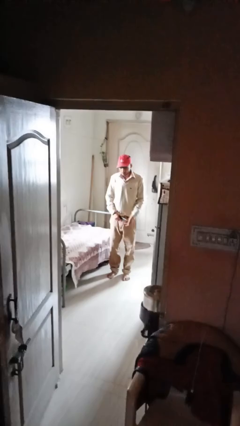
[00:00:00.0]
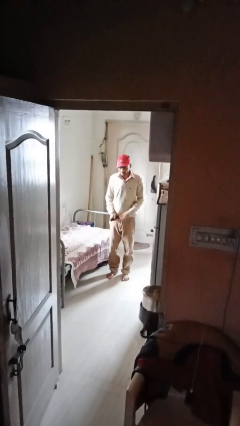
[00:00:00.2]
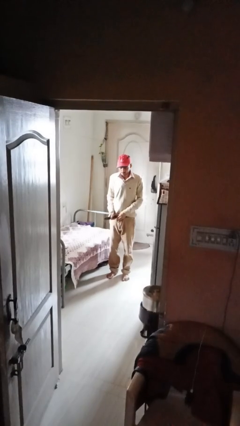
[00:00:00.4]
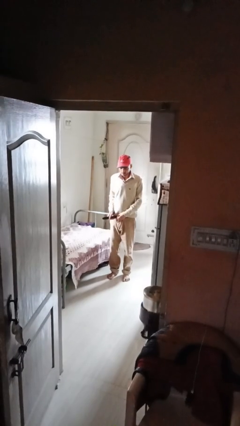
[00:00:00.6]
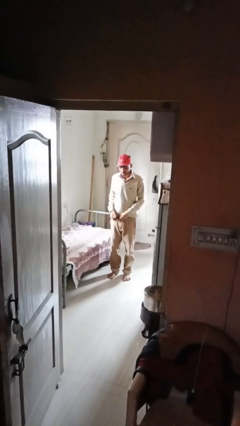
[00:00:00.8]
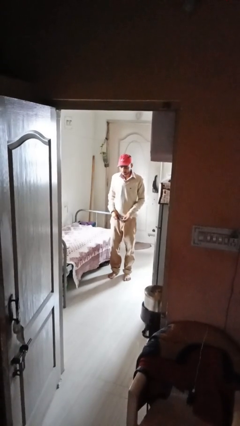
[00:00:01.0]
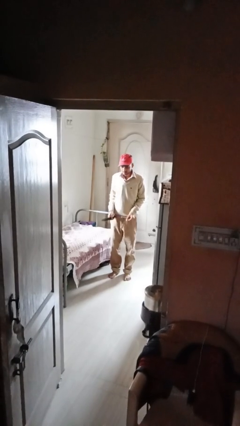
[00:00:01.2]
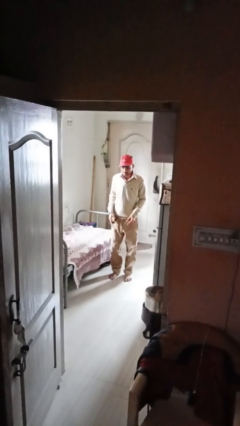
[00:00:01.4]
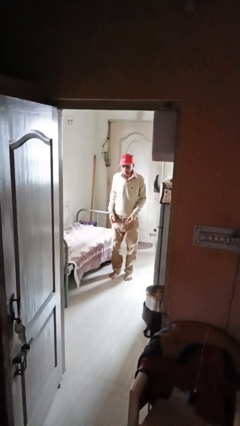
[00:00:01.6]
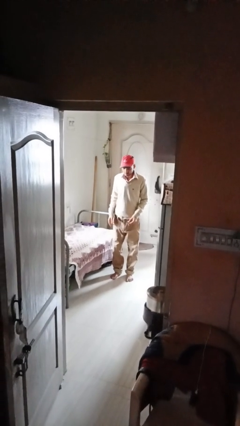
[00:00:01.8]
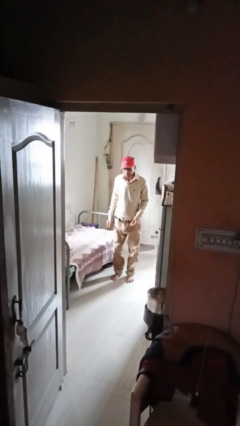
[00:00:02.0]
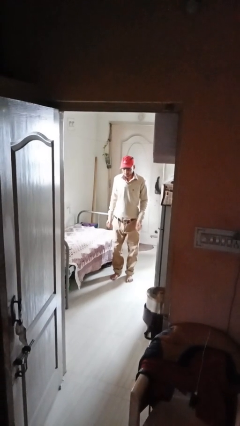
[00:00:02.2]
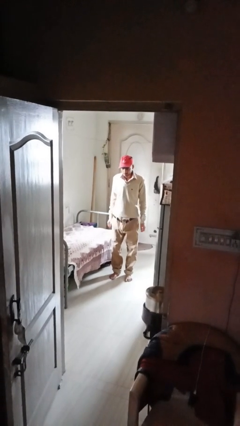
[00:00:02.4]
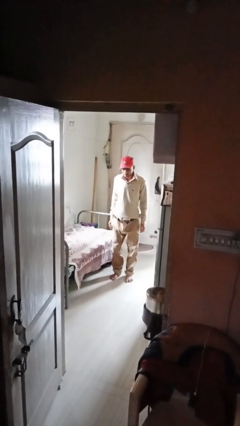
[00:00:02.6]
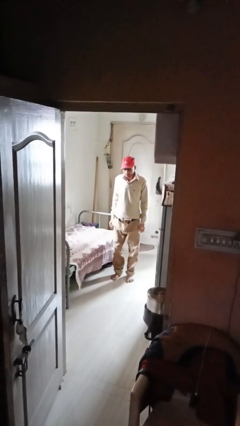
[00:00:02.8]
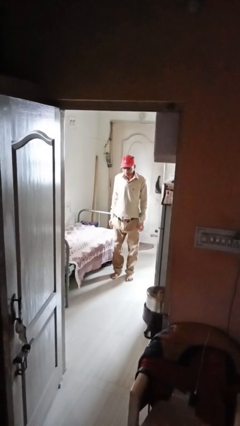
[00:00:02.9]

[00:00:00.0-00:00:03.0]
person takes off belt

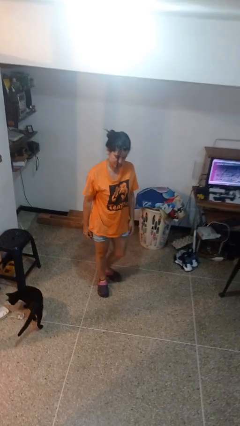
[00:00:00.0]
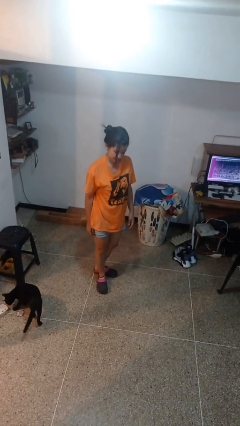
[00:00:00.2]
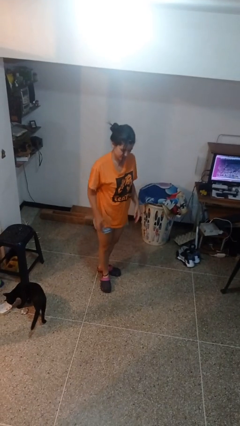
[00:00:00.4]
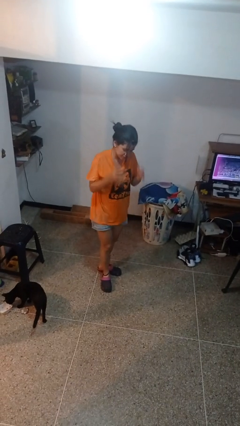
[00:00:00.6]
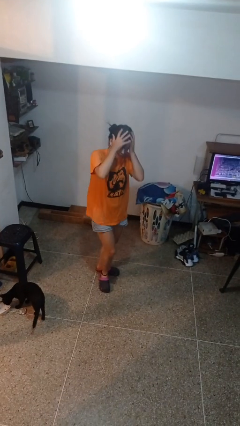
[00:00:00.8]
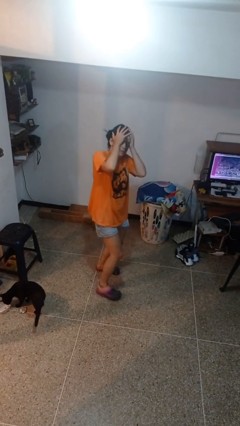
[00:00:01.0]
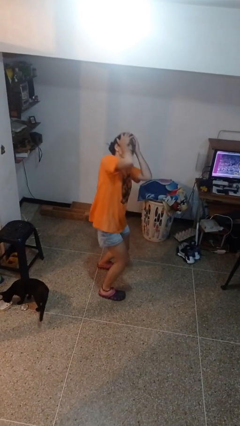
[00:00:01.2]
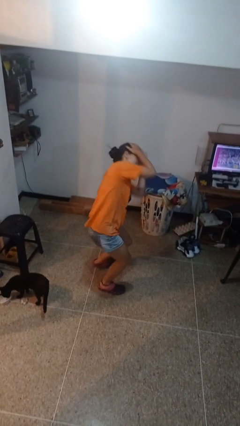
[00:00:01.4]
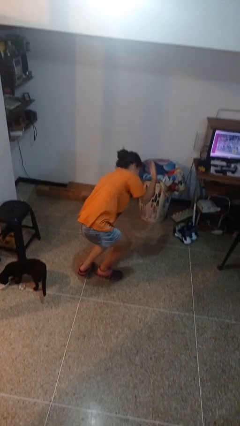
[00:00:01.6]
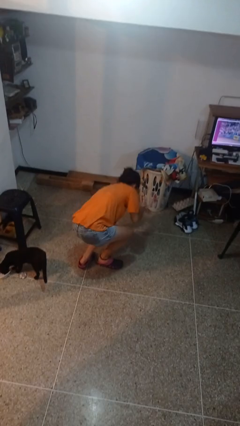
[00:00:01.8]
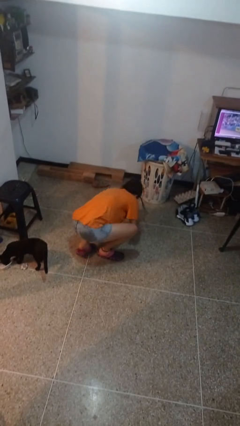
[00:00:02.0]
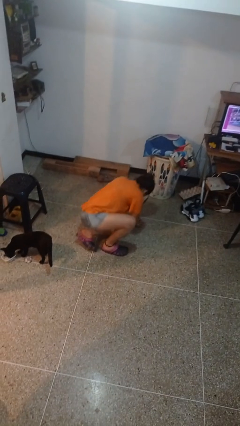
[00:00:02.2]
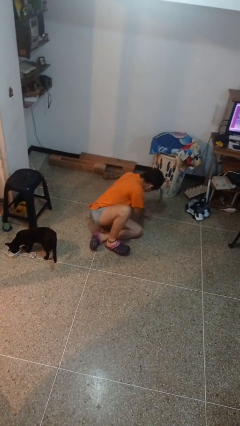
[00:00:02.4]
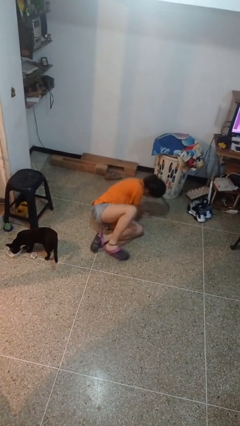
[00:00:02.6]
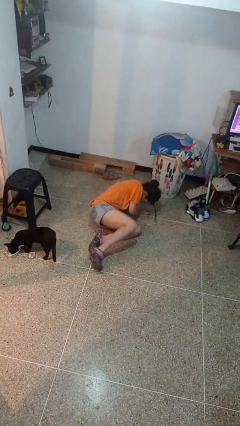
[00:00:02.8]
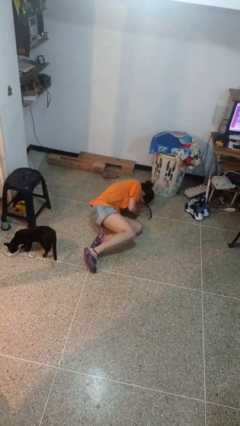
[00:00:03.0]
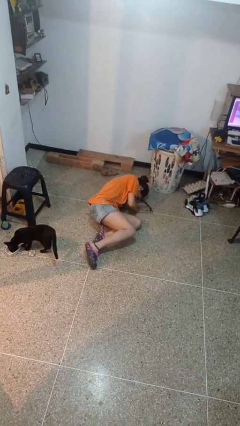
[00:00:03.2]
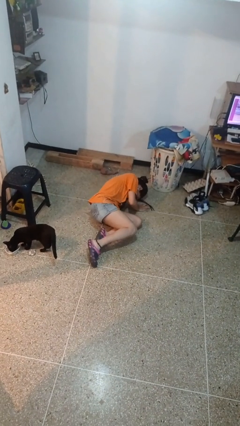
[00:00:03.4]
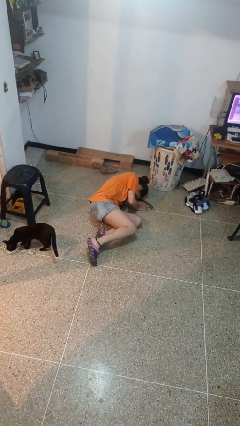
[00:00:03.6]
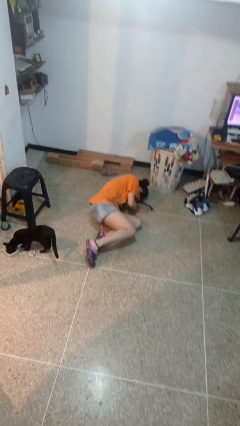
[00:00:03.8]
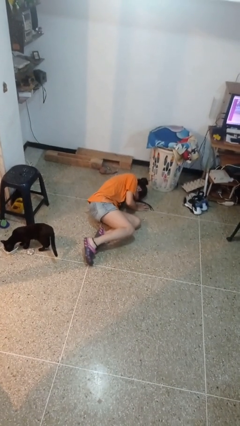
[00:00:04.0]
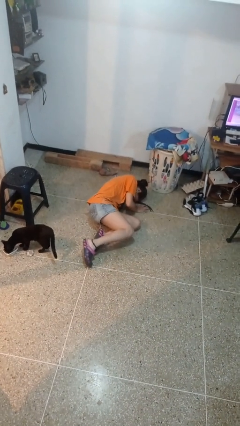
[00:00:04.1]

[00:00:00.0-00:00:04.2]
person falls while standing

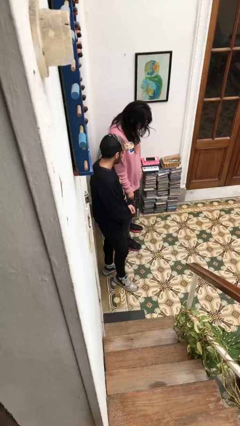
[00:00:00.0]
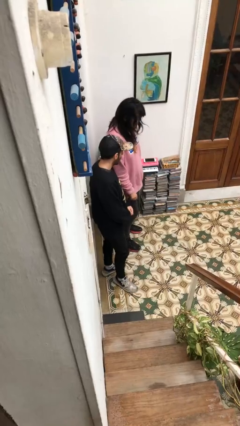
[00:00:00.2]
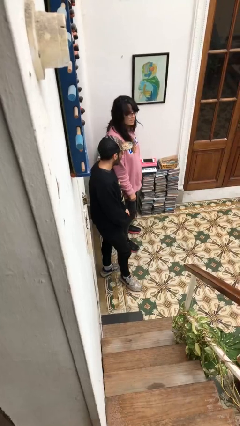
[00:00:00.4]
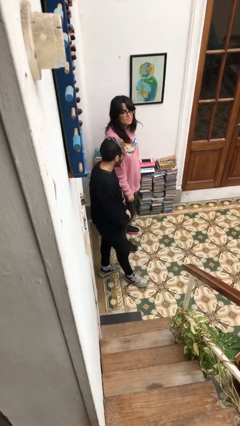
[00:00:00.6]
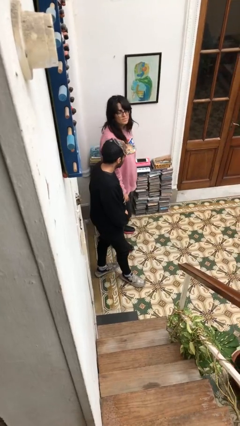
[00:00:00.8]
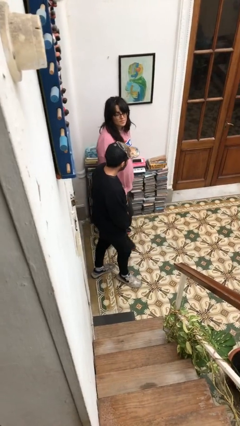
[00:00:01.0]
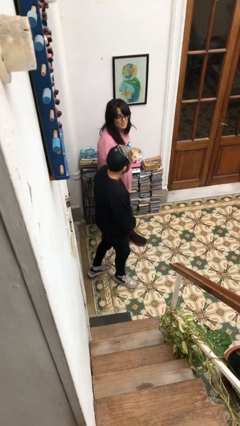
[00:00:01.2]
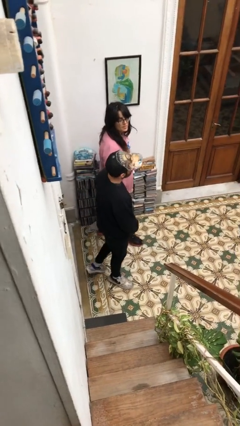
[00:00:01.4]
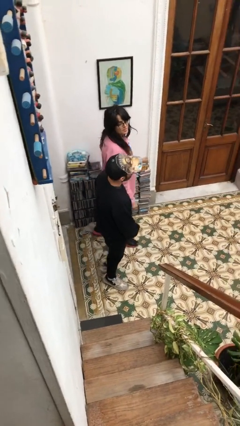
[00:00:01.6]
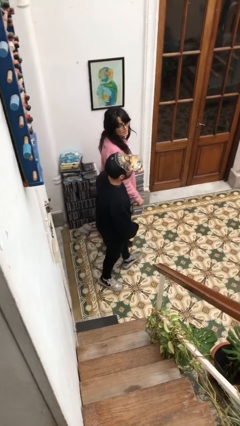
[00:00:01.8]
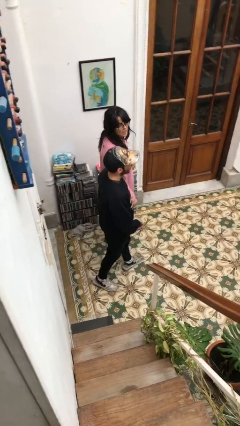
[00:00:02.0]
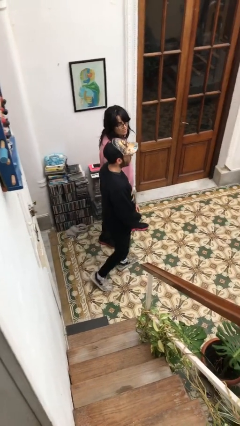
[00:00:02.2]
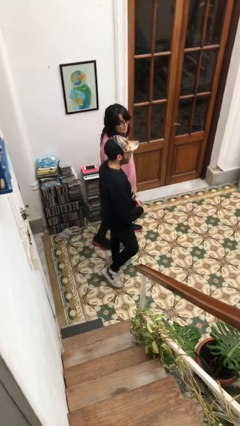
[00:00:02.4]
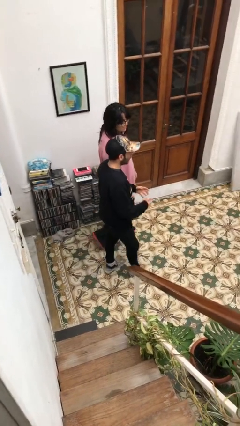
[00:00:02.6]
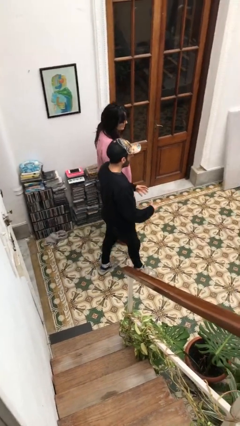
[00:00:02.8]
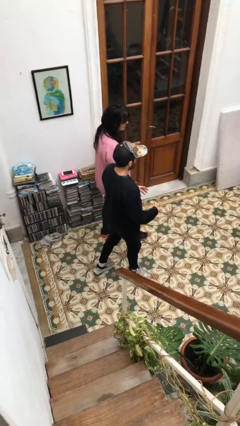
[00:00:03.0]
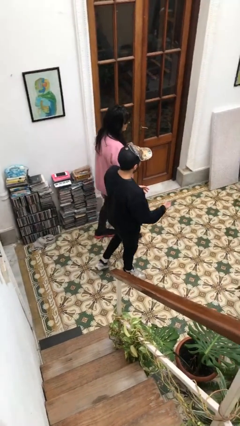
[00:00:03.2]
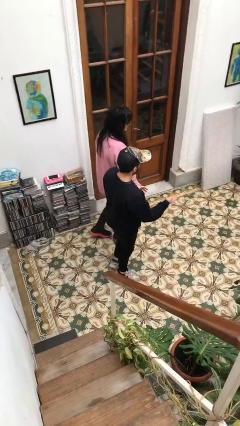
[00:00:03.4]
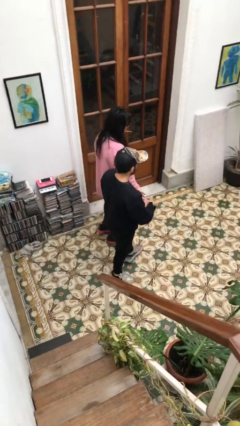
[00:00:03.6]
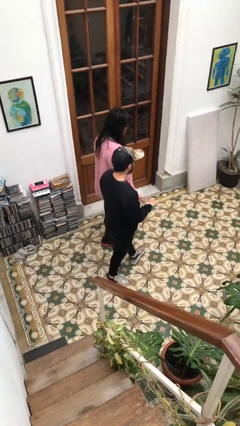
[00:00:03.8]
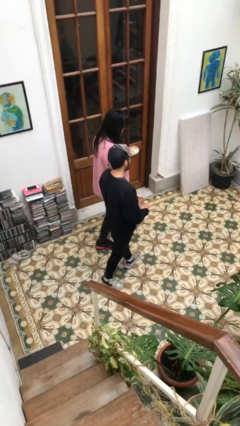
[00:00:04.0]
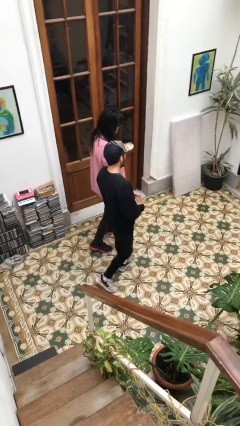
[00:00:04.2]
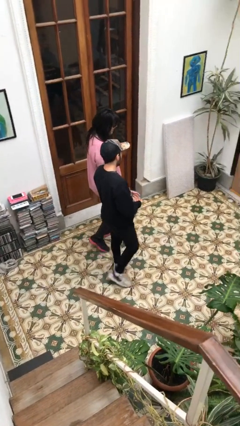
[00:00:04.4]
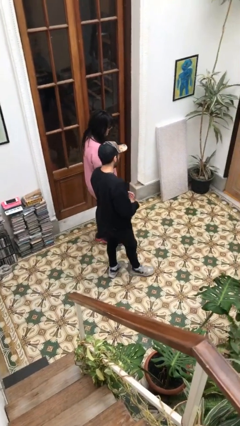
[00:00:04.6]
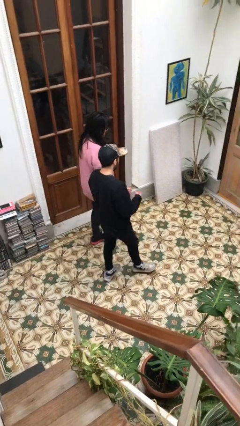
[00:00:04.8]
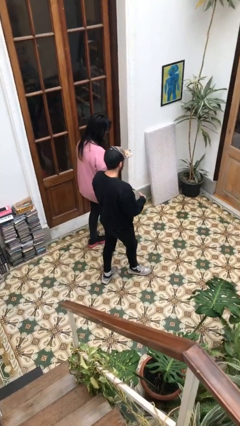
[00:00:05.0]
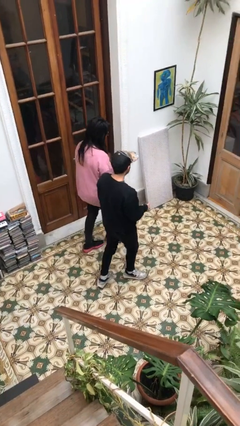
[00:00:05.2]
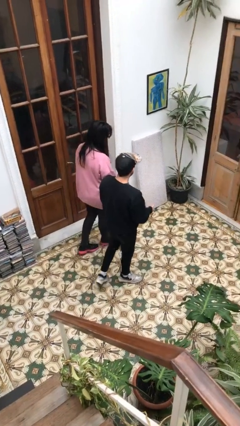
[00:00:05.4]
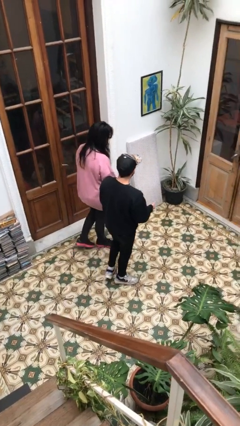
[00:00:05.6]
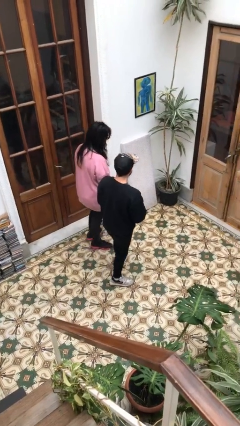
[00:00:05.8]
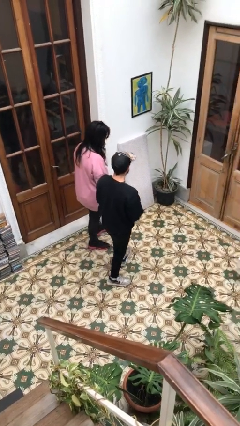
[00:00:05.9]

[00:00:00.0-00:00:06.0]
person talks to person

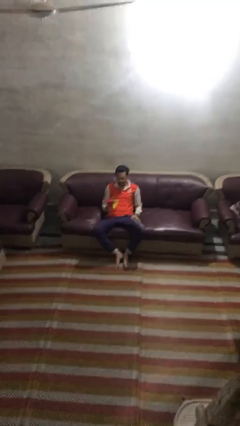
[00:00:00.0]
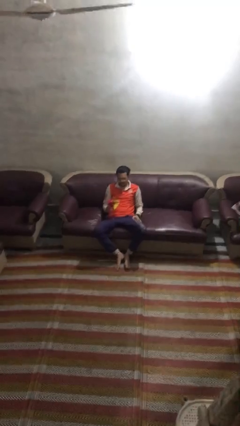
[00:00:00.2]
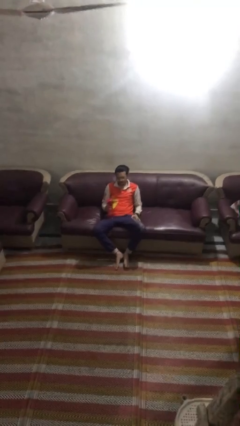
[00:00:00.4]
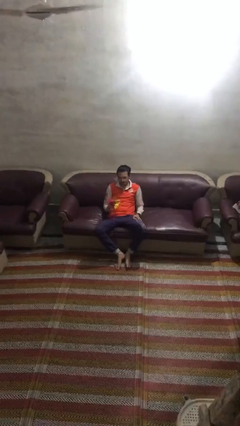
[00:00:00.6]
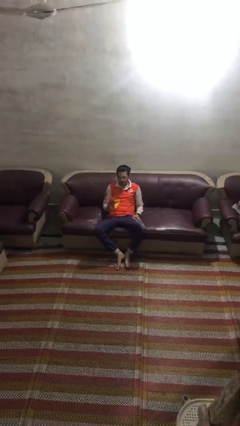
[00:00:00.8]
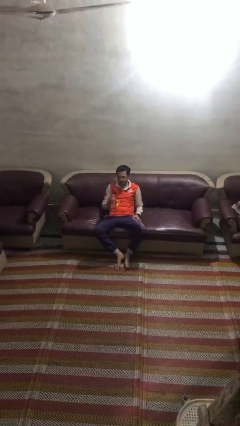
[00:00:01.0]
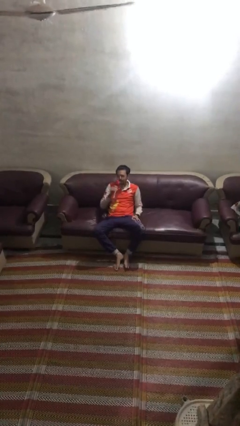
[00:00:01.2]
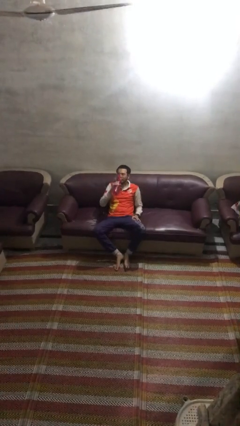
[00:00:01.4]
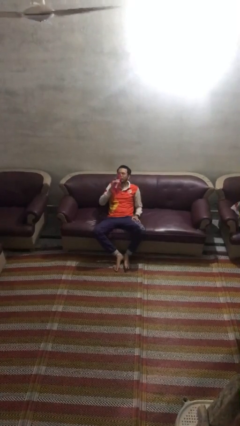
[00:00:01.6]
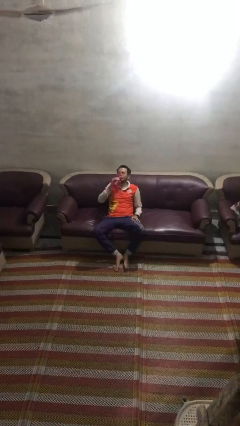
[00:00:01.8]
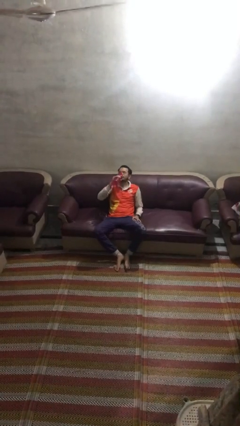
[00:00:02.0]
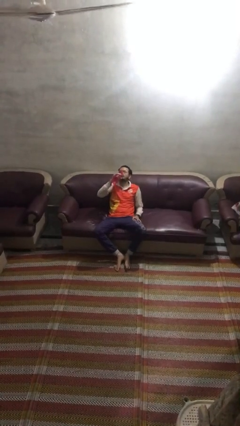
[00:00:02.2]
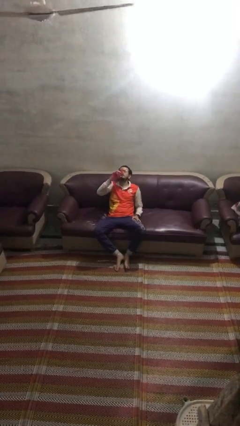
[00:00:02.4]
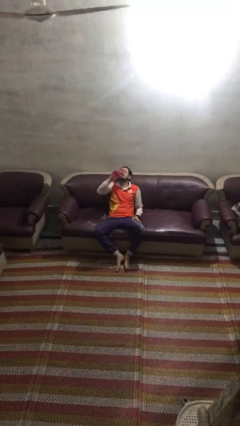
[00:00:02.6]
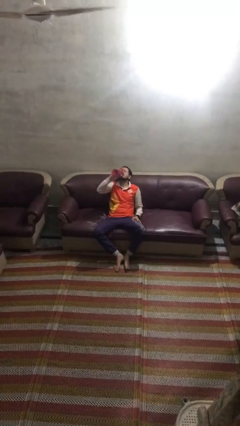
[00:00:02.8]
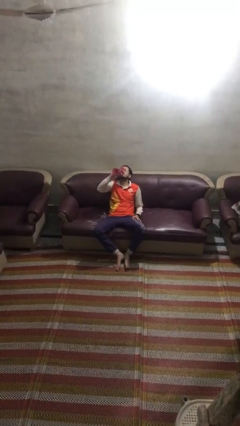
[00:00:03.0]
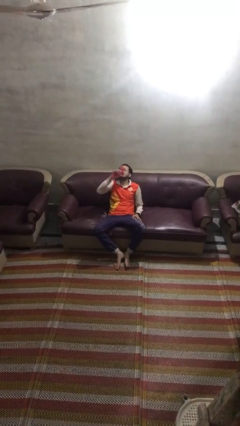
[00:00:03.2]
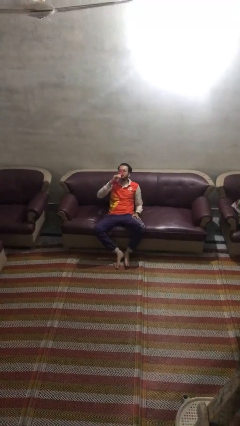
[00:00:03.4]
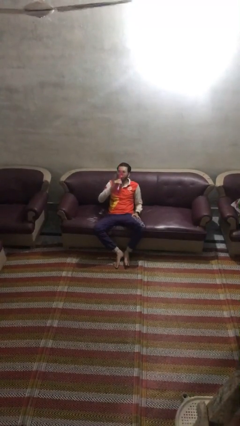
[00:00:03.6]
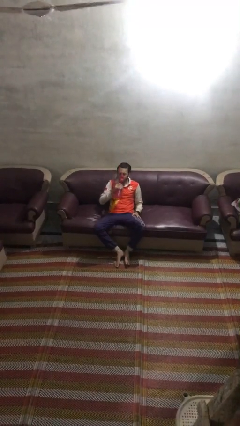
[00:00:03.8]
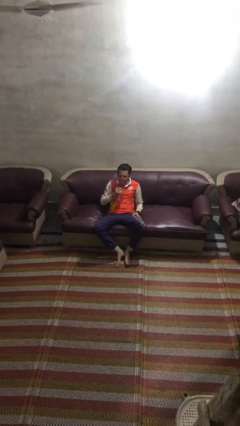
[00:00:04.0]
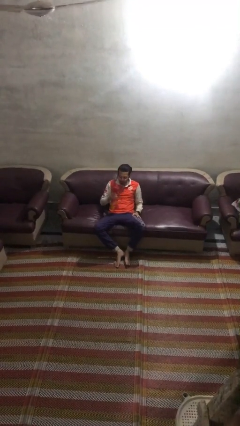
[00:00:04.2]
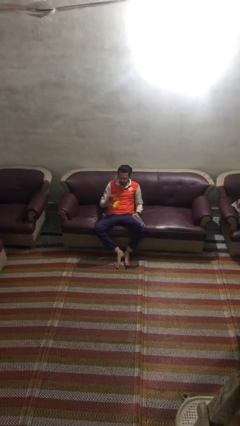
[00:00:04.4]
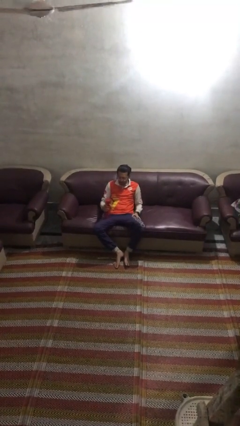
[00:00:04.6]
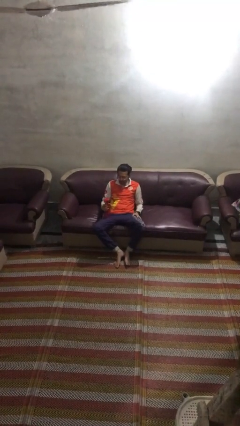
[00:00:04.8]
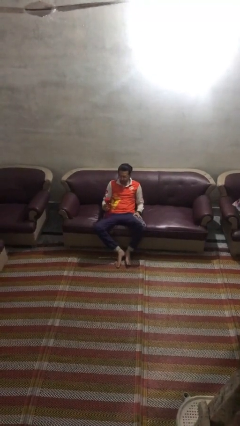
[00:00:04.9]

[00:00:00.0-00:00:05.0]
person drinks from bottle
